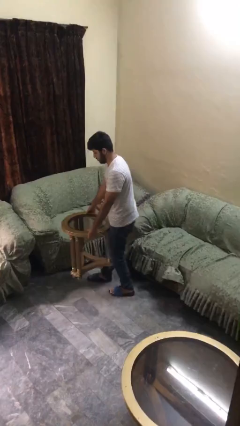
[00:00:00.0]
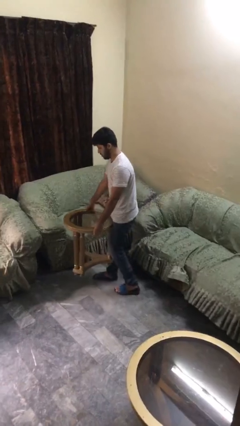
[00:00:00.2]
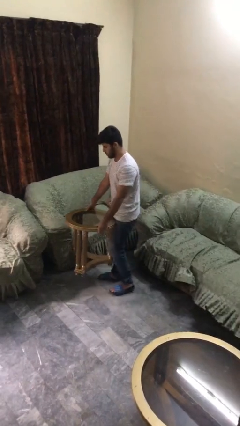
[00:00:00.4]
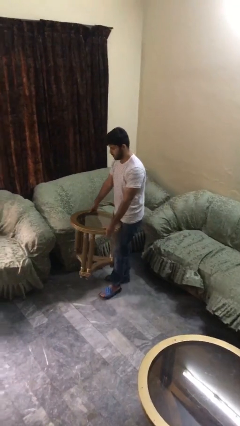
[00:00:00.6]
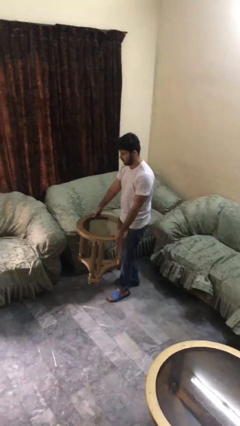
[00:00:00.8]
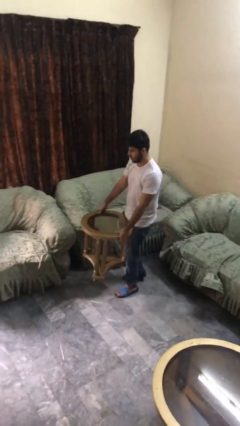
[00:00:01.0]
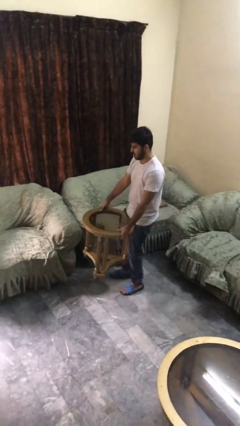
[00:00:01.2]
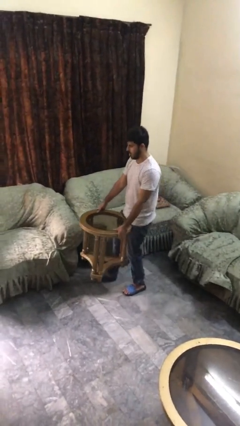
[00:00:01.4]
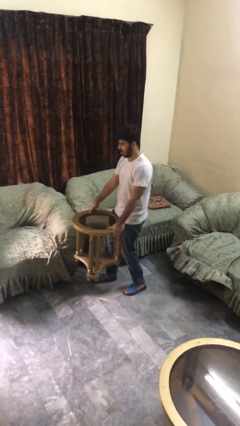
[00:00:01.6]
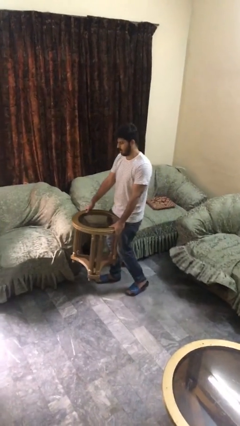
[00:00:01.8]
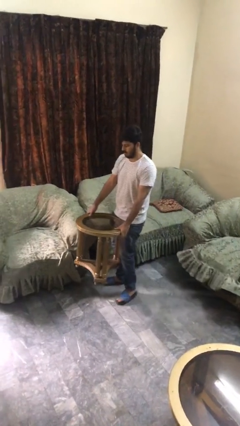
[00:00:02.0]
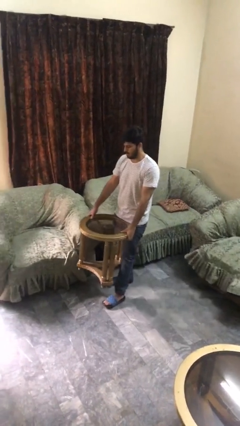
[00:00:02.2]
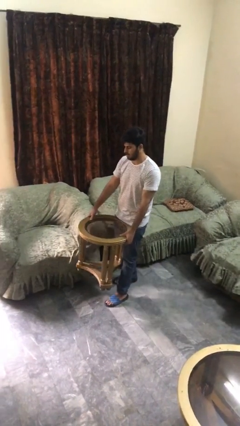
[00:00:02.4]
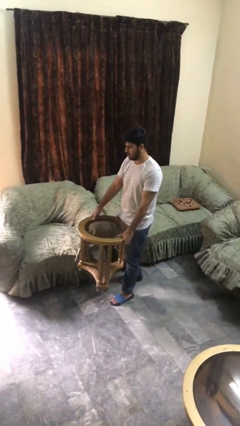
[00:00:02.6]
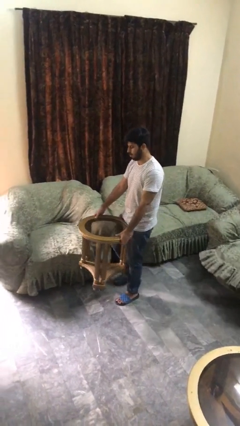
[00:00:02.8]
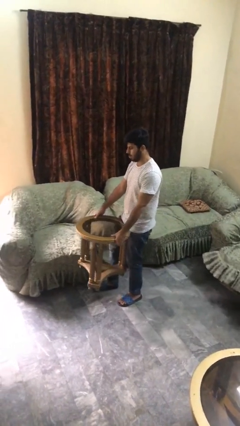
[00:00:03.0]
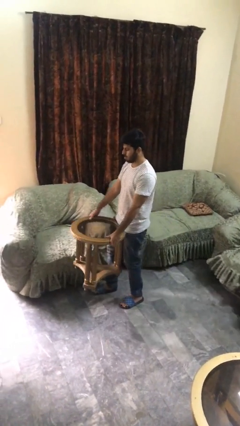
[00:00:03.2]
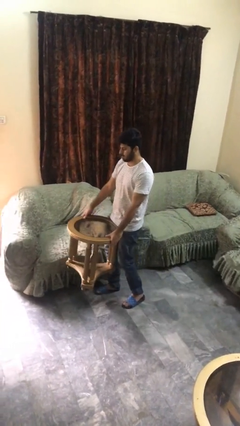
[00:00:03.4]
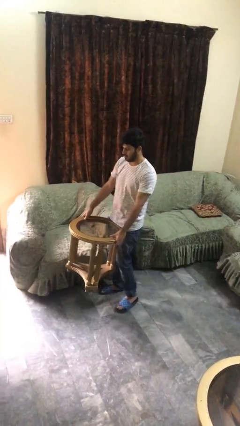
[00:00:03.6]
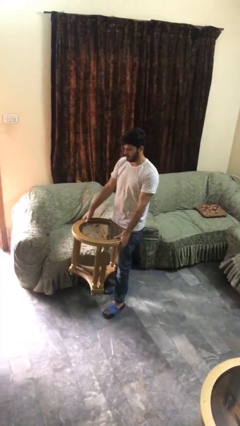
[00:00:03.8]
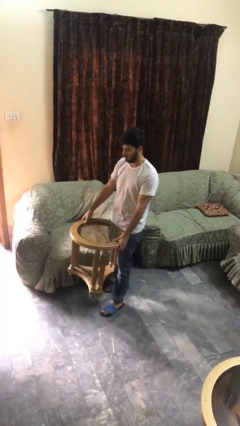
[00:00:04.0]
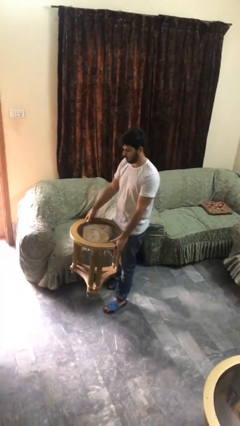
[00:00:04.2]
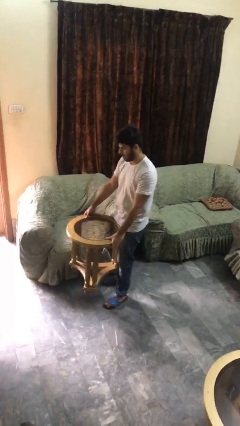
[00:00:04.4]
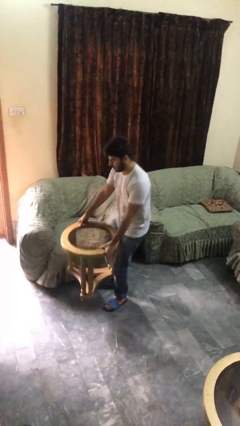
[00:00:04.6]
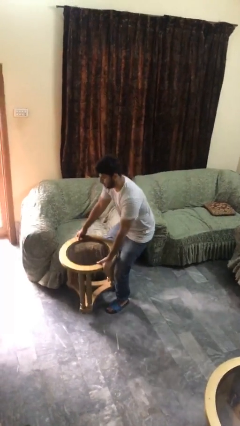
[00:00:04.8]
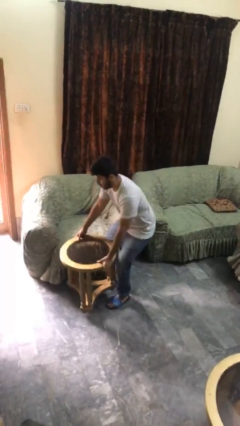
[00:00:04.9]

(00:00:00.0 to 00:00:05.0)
person carries heavy object

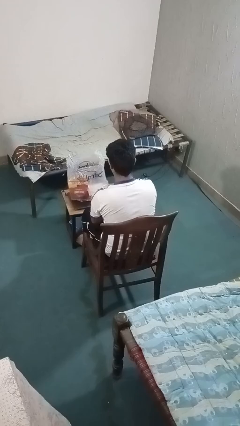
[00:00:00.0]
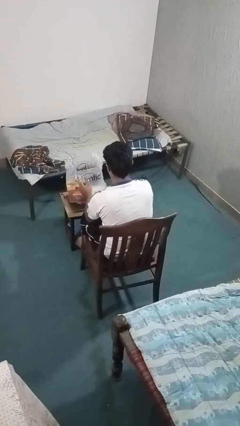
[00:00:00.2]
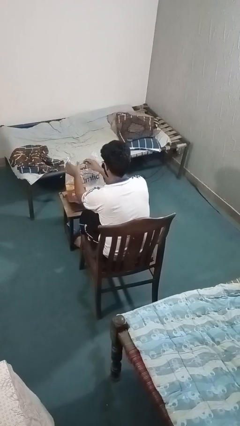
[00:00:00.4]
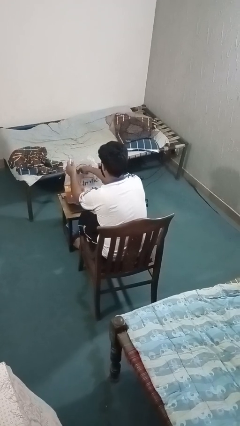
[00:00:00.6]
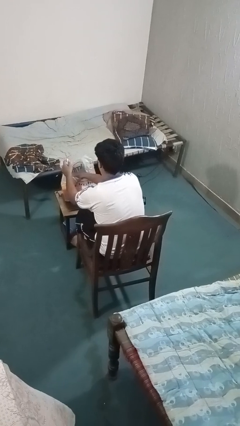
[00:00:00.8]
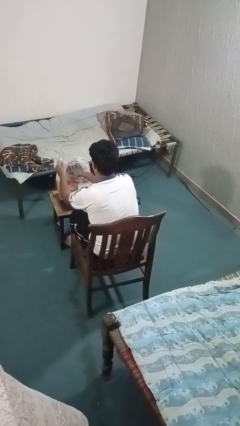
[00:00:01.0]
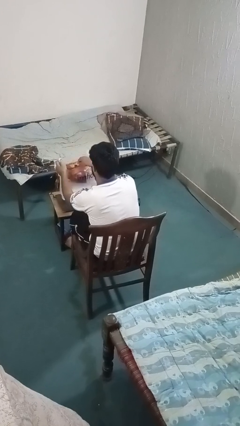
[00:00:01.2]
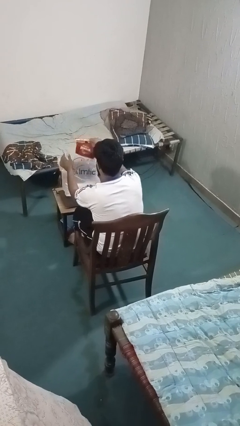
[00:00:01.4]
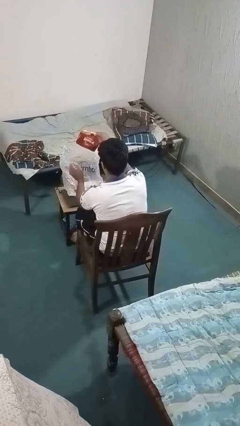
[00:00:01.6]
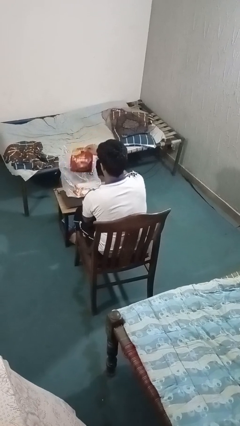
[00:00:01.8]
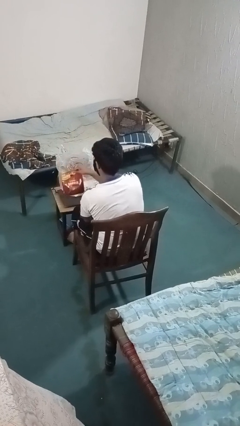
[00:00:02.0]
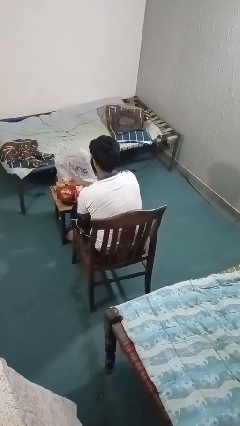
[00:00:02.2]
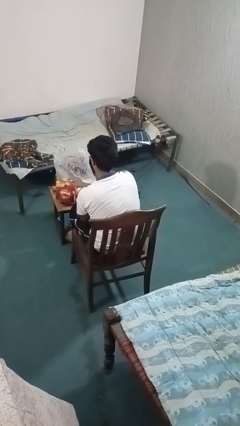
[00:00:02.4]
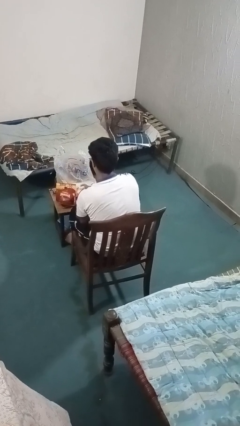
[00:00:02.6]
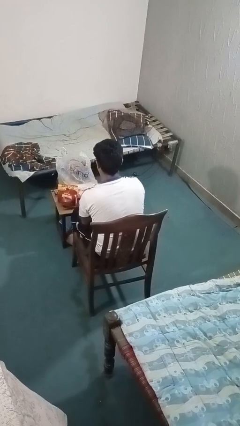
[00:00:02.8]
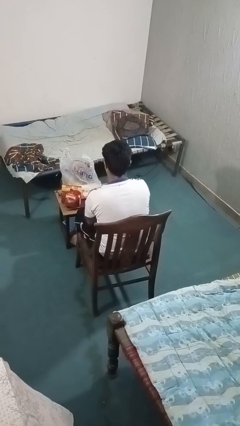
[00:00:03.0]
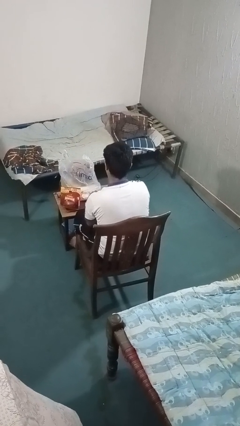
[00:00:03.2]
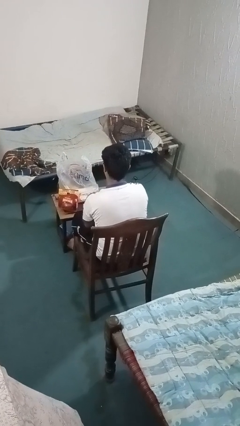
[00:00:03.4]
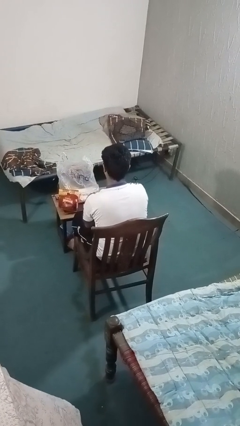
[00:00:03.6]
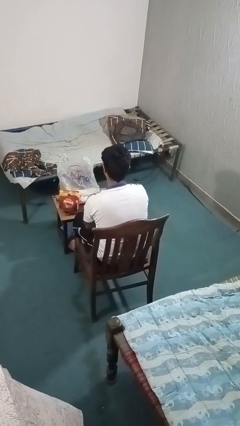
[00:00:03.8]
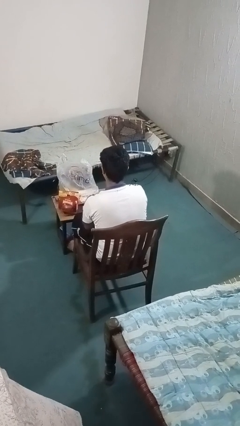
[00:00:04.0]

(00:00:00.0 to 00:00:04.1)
person takes object from bag

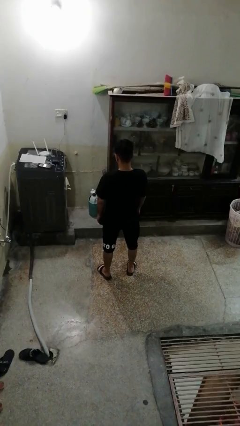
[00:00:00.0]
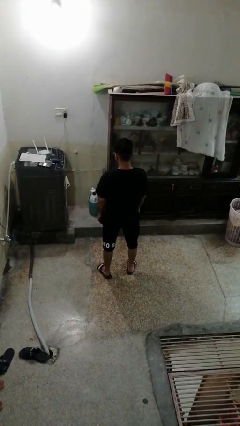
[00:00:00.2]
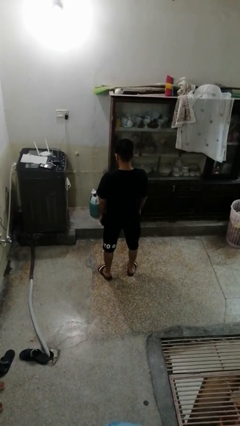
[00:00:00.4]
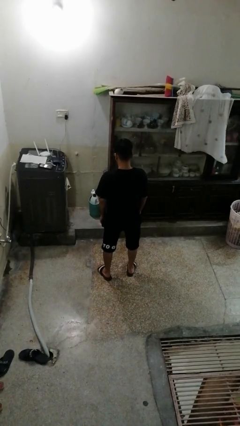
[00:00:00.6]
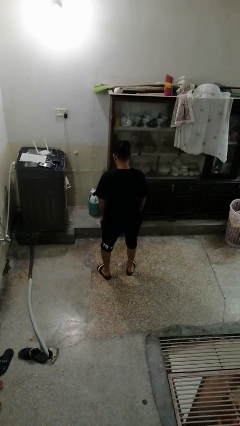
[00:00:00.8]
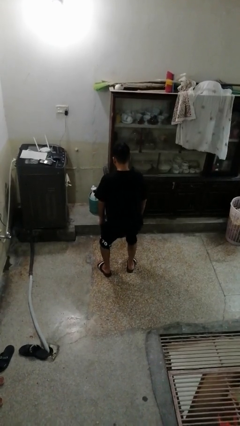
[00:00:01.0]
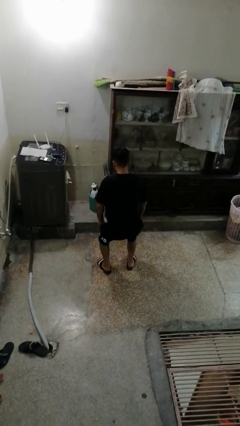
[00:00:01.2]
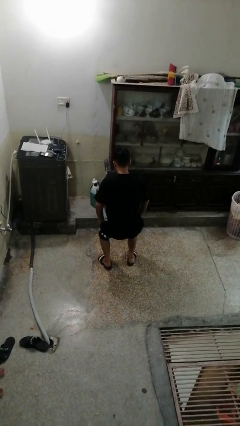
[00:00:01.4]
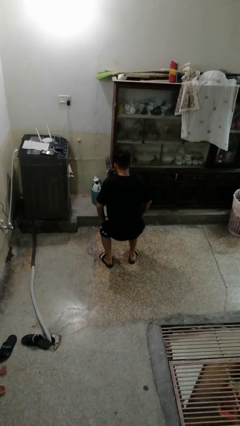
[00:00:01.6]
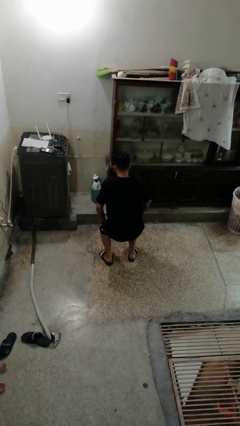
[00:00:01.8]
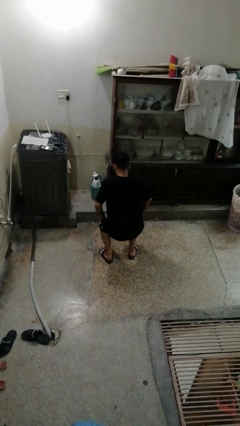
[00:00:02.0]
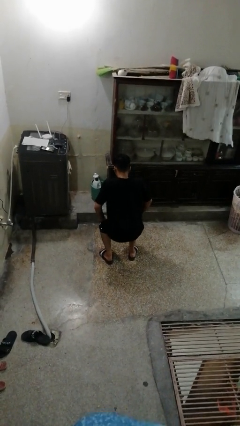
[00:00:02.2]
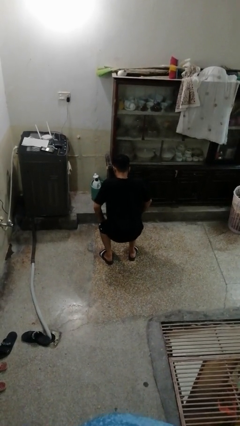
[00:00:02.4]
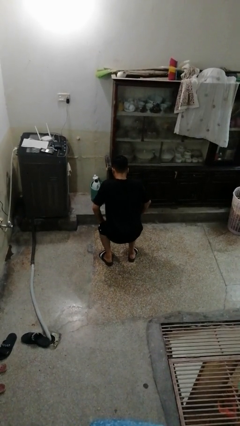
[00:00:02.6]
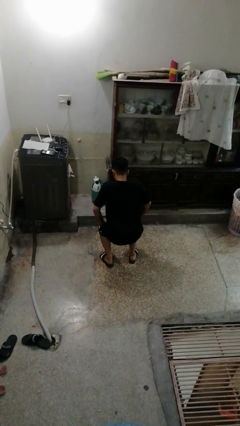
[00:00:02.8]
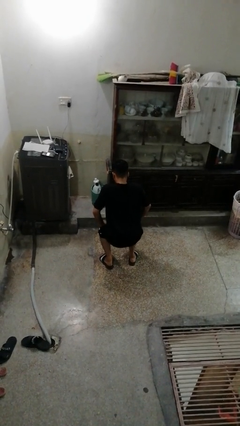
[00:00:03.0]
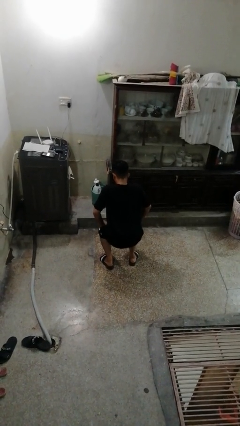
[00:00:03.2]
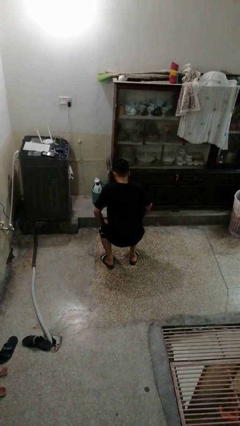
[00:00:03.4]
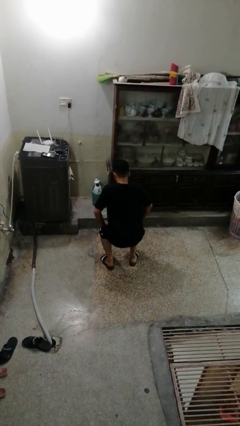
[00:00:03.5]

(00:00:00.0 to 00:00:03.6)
person squats

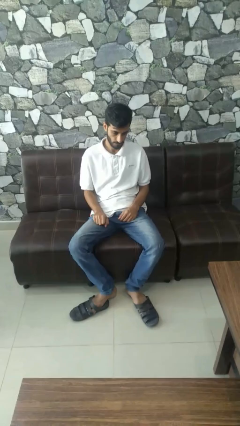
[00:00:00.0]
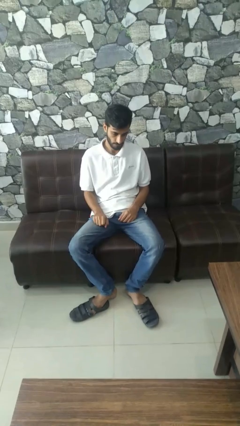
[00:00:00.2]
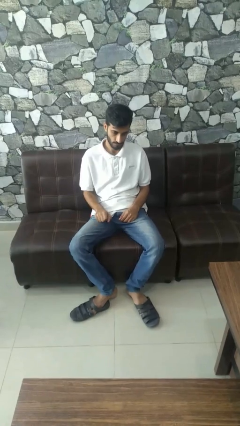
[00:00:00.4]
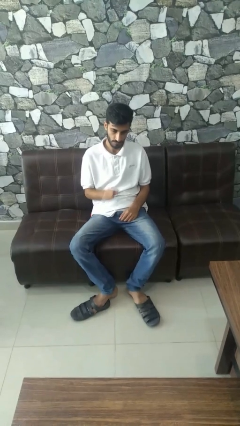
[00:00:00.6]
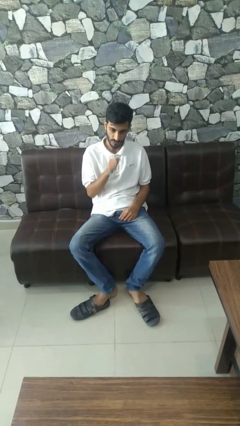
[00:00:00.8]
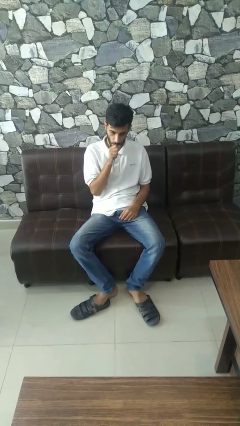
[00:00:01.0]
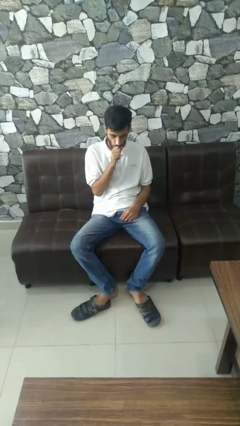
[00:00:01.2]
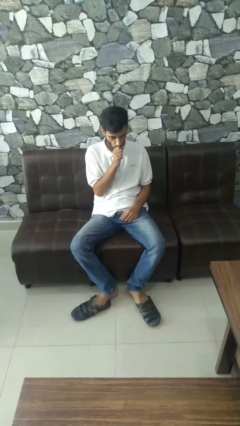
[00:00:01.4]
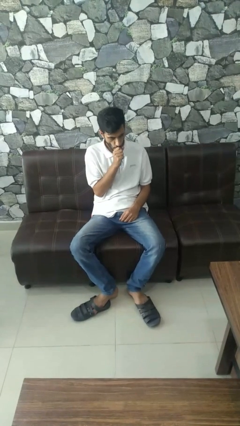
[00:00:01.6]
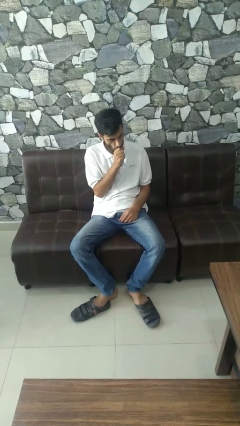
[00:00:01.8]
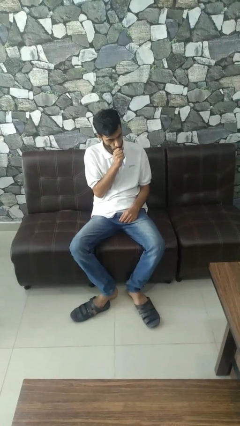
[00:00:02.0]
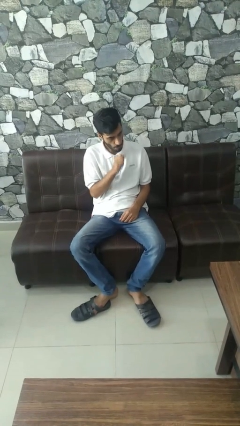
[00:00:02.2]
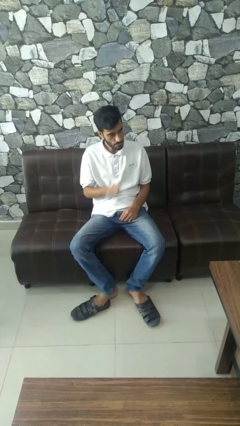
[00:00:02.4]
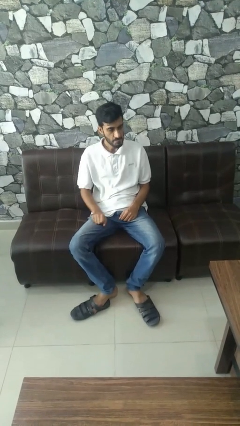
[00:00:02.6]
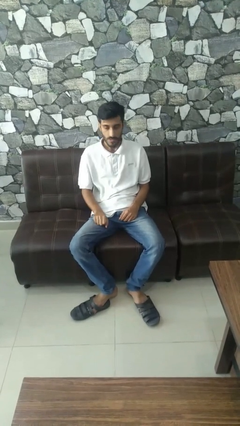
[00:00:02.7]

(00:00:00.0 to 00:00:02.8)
person vapes

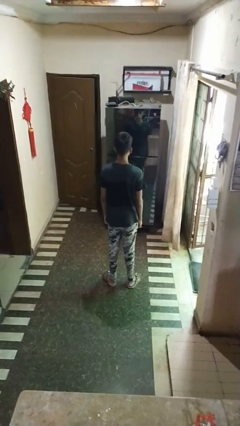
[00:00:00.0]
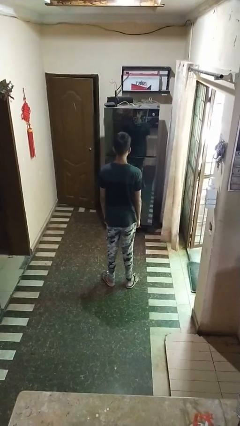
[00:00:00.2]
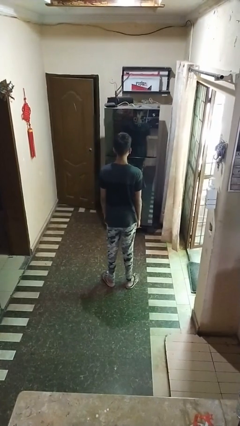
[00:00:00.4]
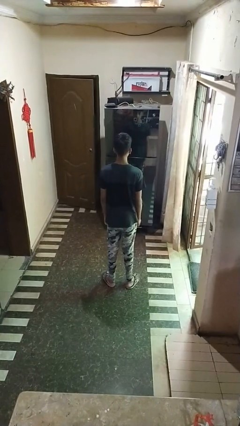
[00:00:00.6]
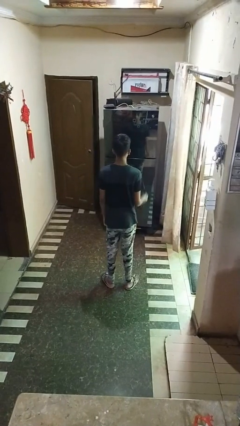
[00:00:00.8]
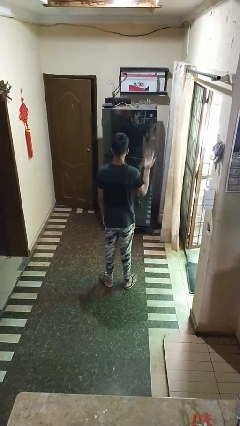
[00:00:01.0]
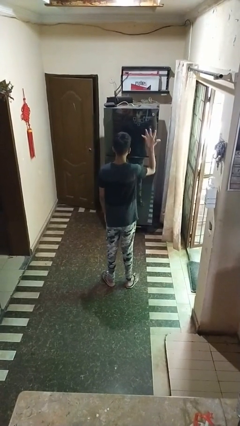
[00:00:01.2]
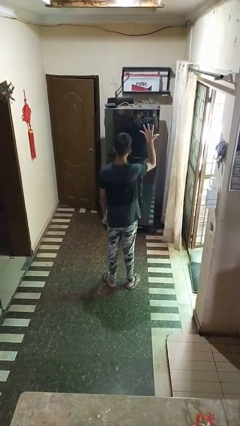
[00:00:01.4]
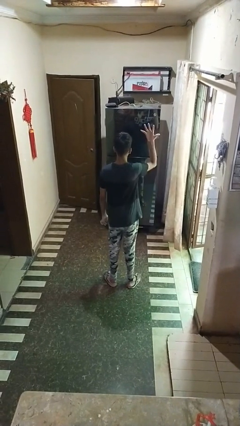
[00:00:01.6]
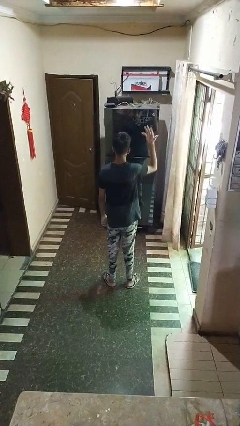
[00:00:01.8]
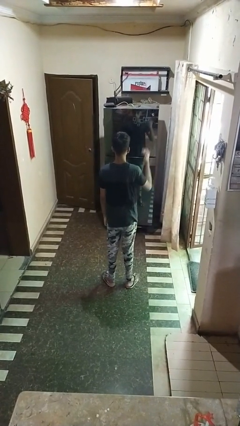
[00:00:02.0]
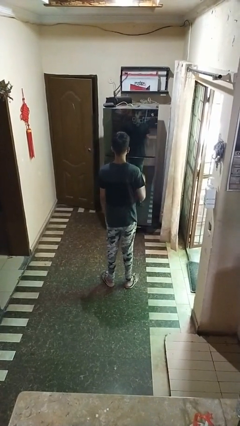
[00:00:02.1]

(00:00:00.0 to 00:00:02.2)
person gestures number five
